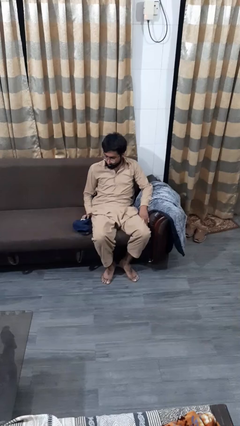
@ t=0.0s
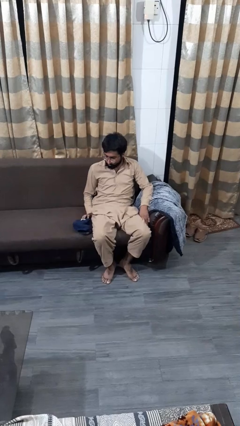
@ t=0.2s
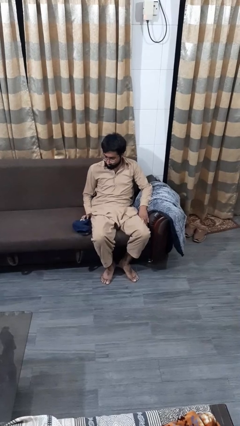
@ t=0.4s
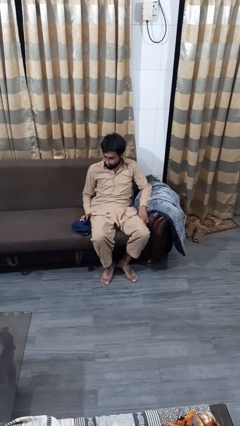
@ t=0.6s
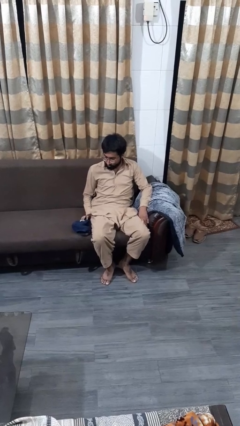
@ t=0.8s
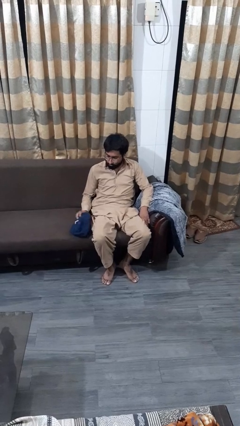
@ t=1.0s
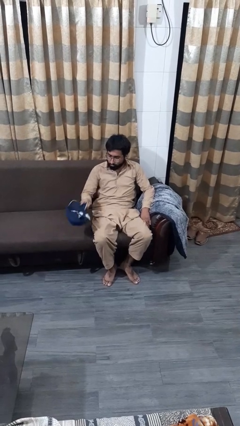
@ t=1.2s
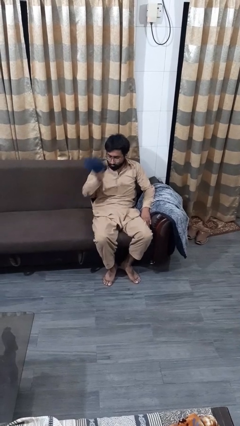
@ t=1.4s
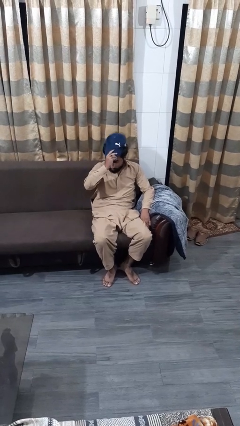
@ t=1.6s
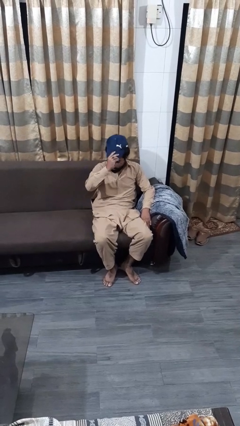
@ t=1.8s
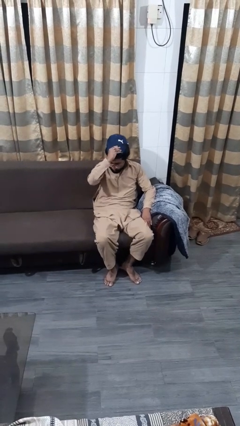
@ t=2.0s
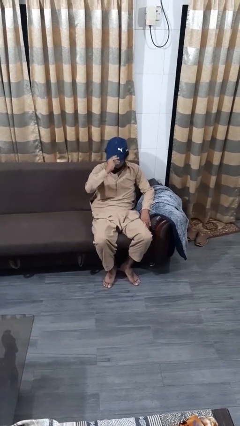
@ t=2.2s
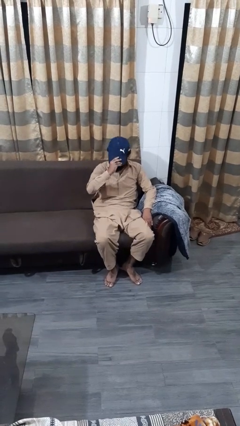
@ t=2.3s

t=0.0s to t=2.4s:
person puts on hat

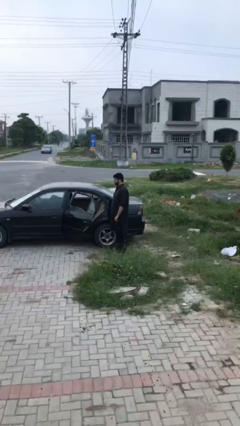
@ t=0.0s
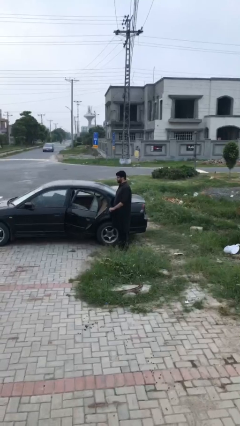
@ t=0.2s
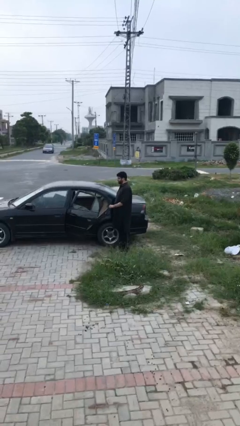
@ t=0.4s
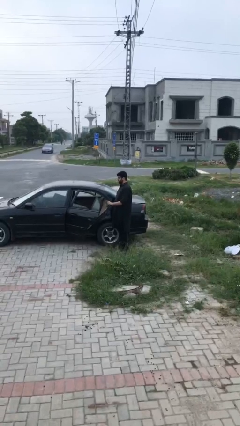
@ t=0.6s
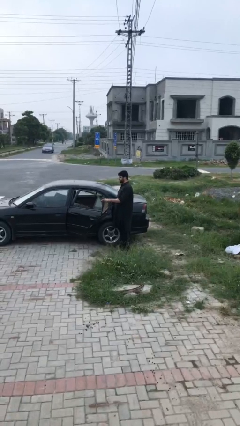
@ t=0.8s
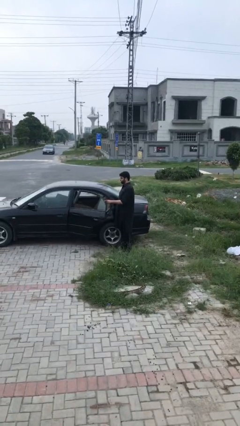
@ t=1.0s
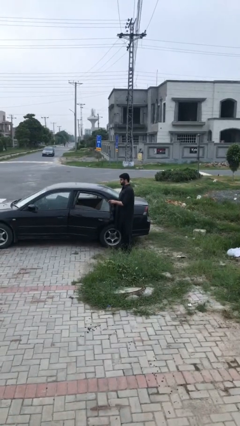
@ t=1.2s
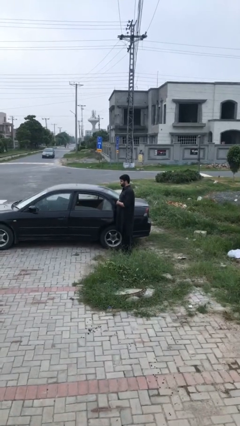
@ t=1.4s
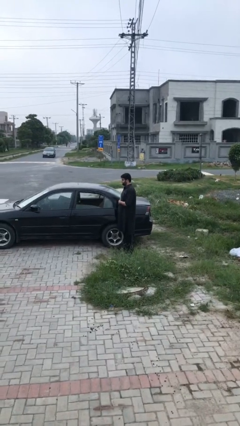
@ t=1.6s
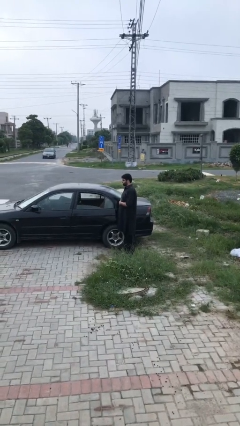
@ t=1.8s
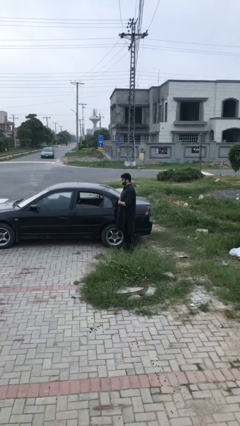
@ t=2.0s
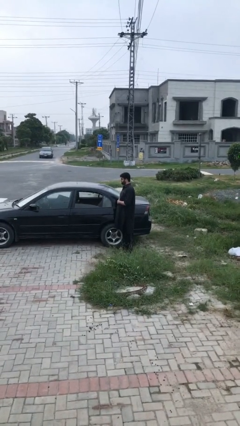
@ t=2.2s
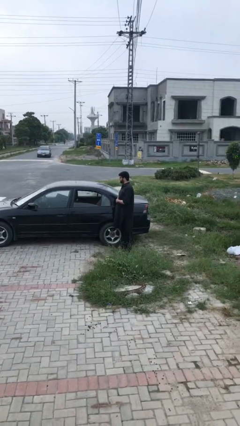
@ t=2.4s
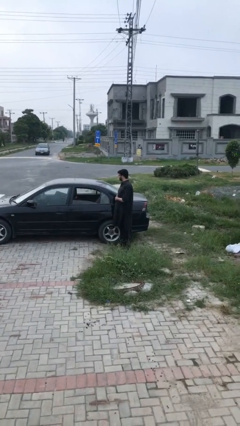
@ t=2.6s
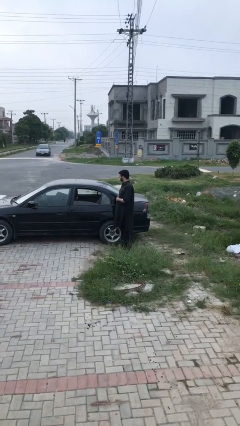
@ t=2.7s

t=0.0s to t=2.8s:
person closes car door

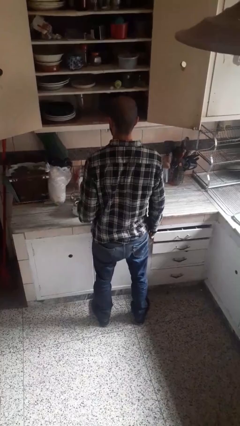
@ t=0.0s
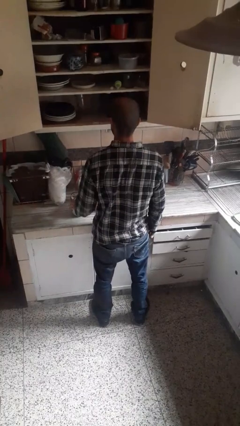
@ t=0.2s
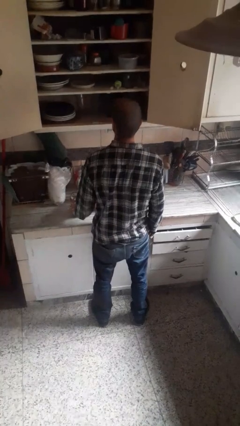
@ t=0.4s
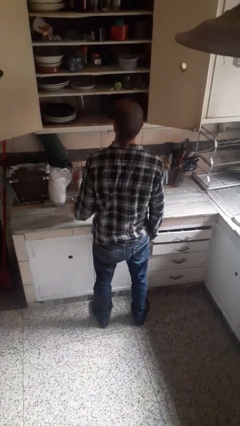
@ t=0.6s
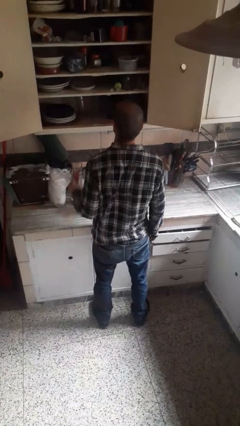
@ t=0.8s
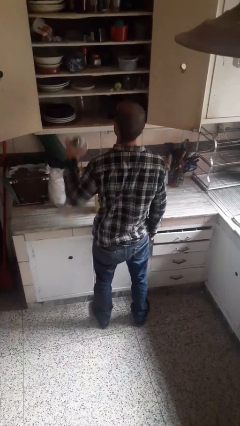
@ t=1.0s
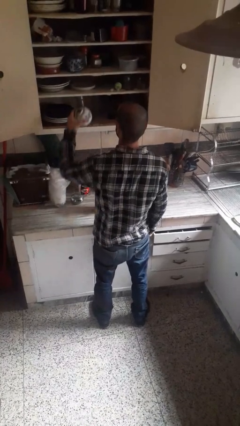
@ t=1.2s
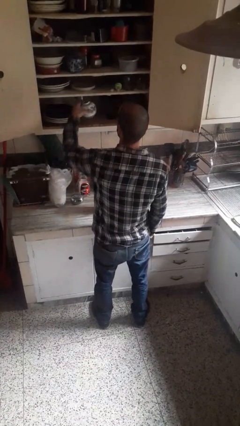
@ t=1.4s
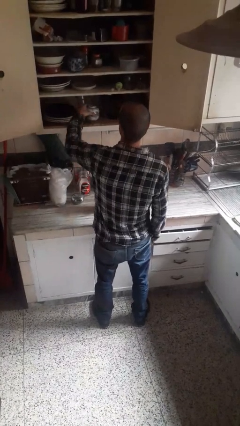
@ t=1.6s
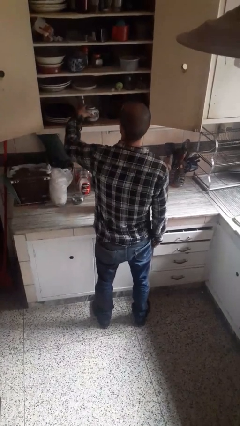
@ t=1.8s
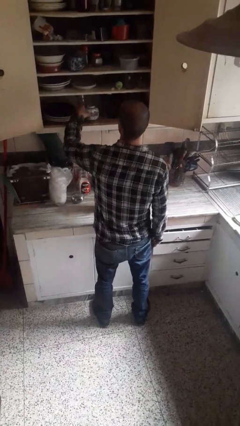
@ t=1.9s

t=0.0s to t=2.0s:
person puts object in cabinet

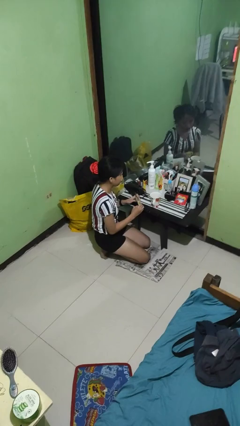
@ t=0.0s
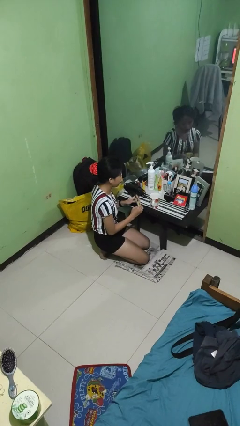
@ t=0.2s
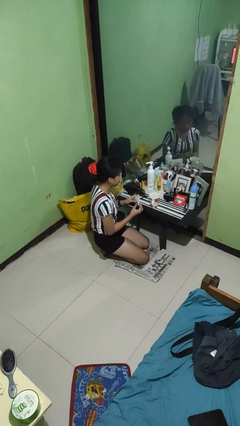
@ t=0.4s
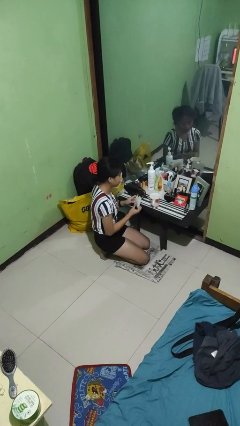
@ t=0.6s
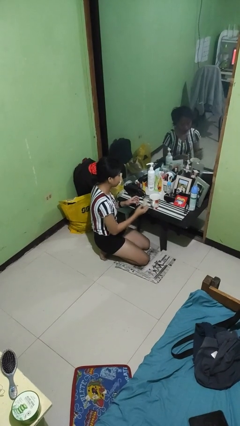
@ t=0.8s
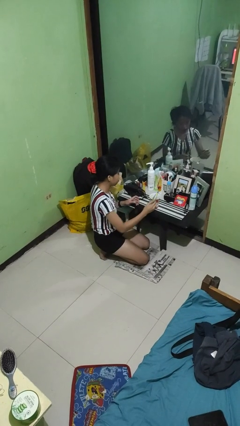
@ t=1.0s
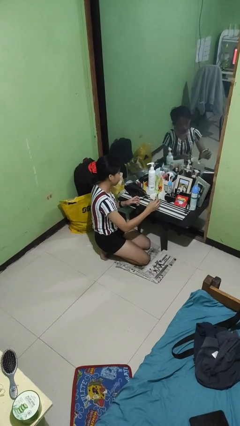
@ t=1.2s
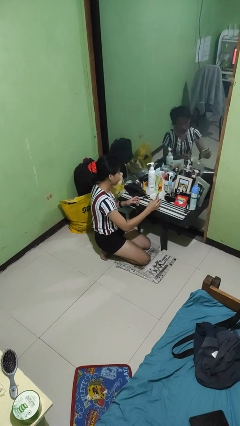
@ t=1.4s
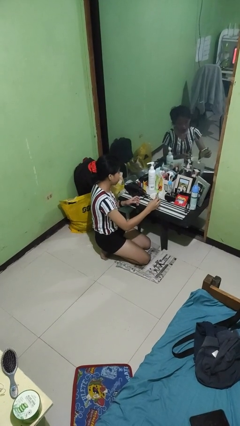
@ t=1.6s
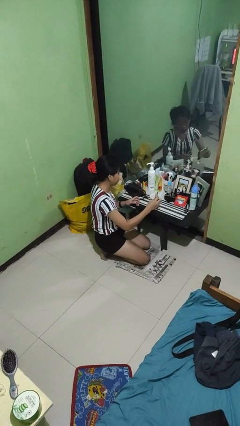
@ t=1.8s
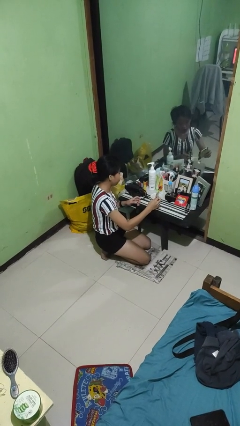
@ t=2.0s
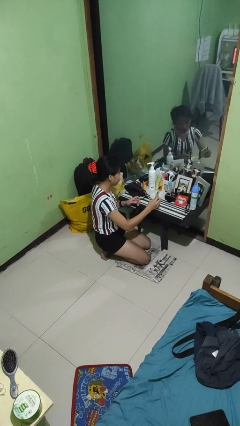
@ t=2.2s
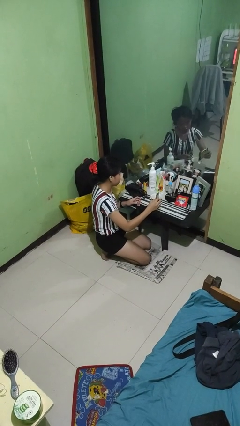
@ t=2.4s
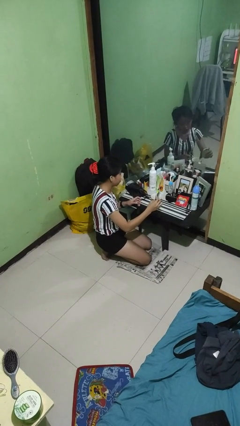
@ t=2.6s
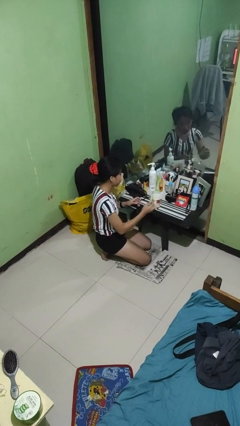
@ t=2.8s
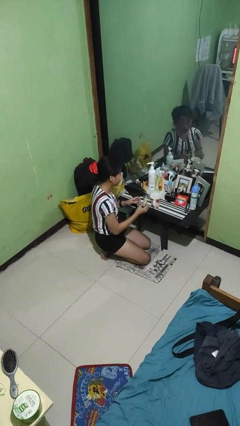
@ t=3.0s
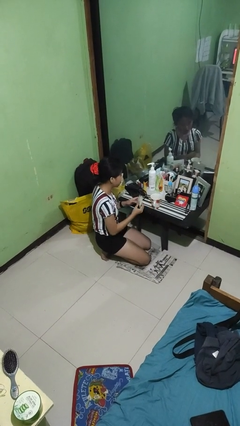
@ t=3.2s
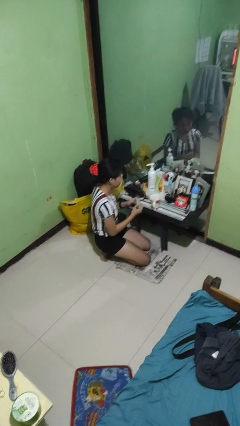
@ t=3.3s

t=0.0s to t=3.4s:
person pours coffee into mug

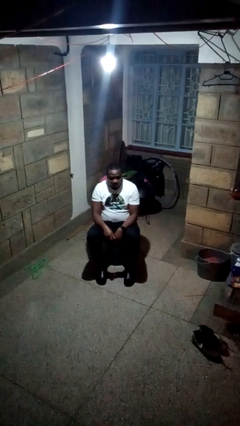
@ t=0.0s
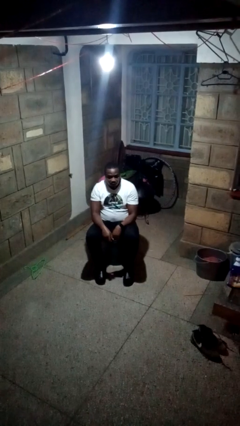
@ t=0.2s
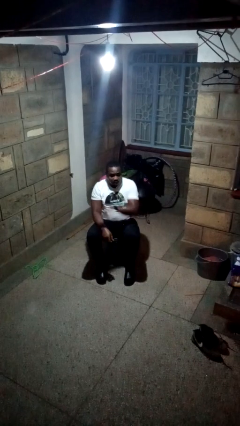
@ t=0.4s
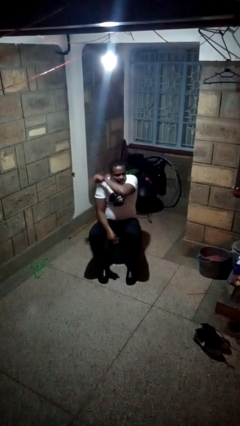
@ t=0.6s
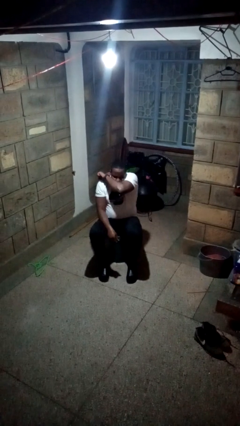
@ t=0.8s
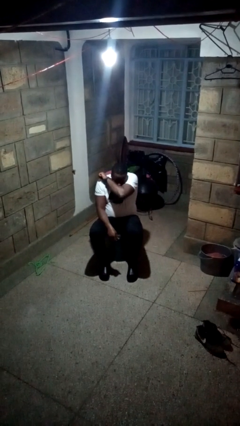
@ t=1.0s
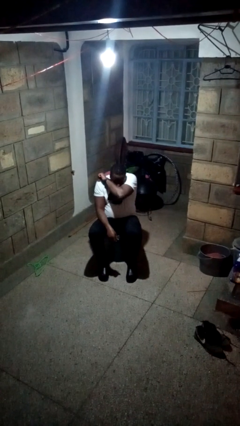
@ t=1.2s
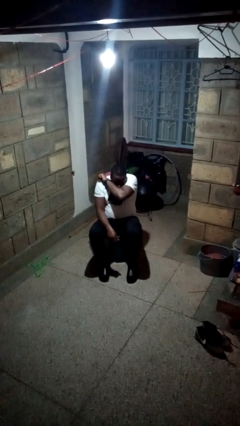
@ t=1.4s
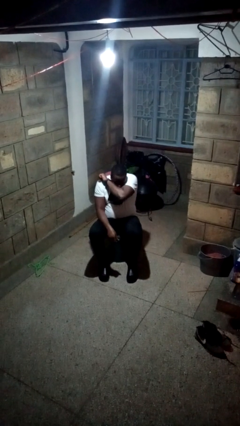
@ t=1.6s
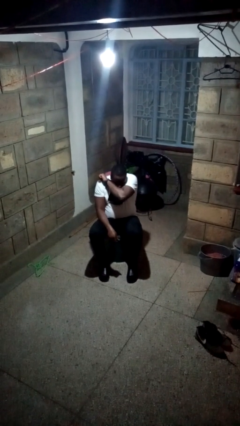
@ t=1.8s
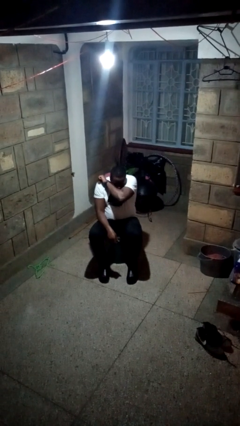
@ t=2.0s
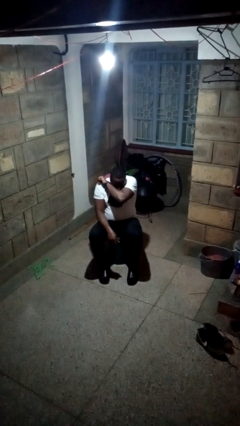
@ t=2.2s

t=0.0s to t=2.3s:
person sneezes into arm

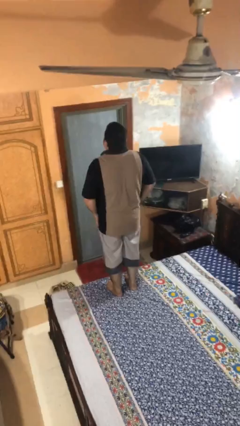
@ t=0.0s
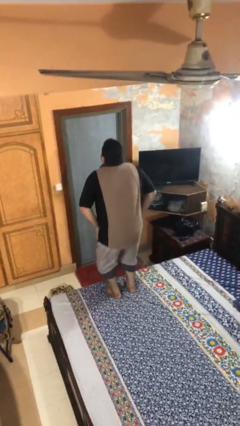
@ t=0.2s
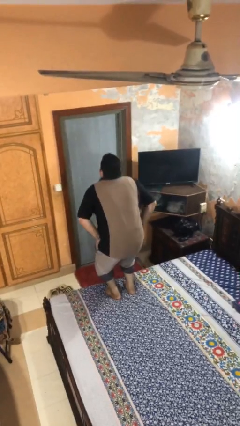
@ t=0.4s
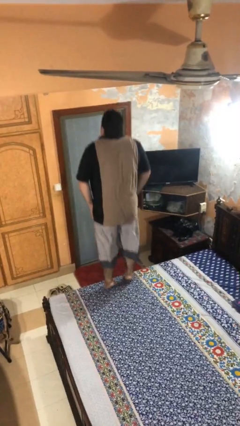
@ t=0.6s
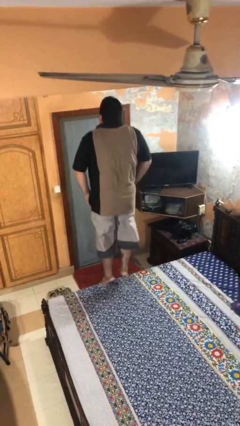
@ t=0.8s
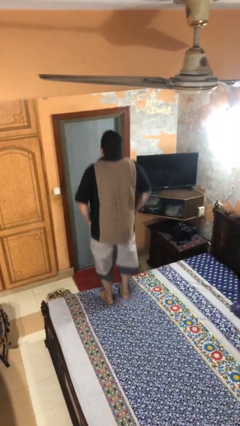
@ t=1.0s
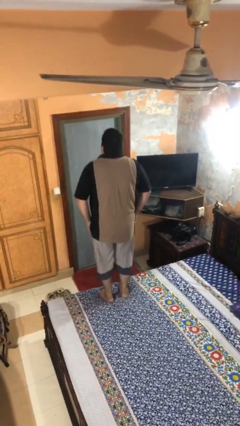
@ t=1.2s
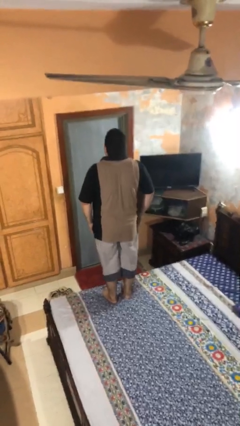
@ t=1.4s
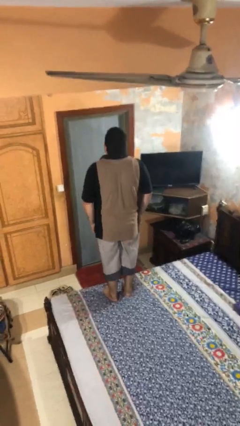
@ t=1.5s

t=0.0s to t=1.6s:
person jumps on bed

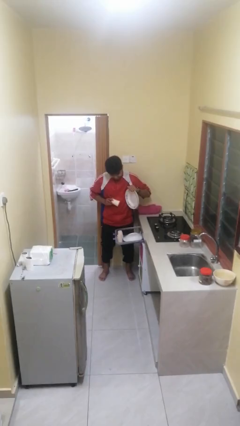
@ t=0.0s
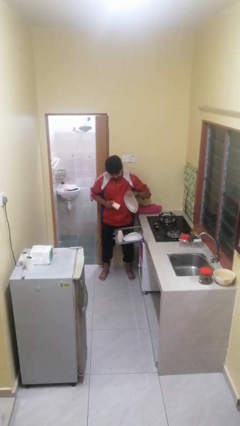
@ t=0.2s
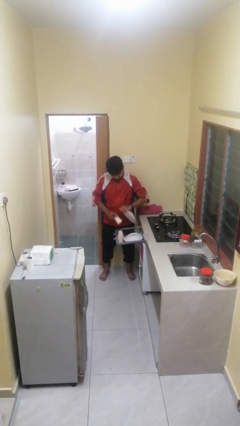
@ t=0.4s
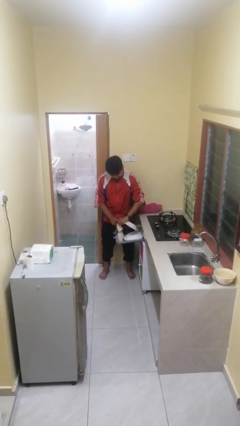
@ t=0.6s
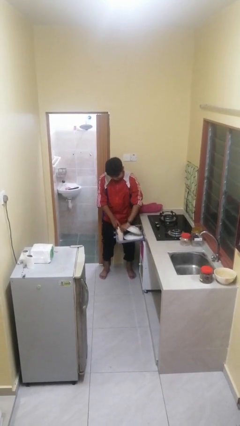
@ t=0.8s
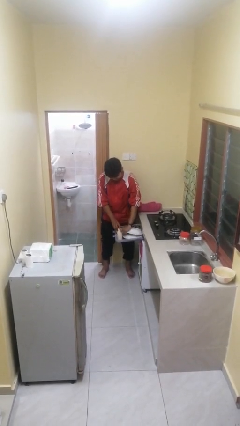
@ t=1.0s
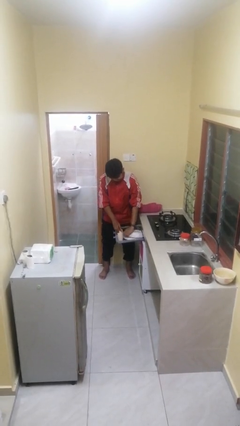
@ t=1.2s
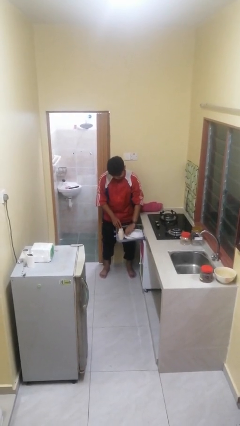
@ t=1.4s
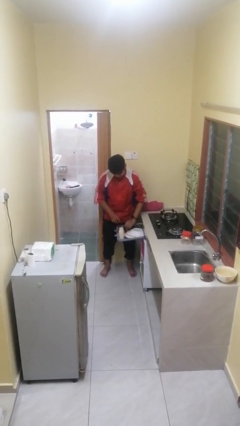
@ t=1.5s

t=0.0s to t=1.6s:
person puts object into kitchen drawer

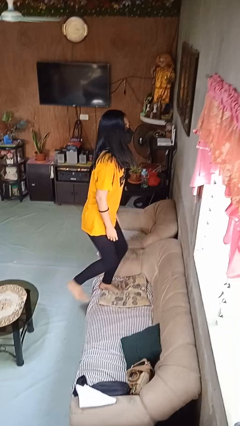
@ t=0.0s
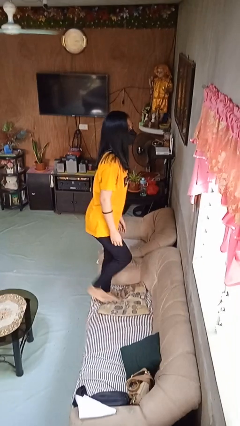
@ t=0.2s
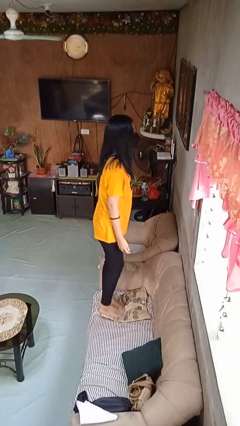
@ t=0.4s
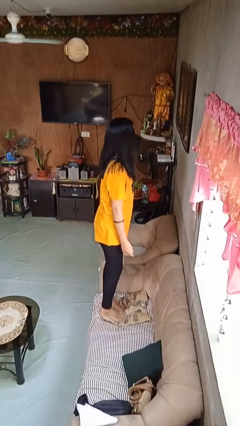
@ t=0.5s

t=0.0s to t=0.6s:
person climbs on couch
